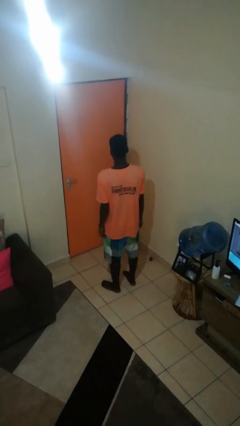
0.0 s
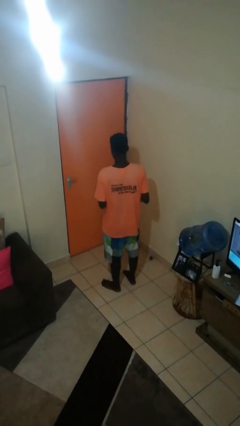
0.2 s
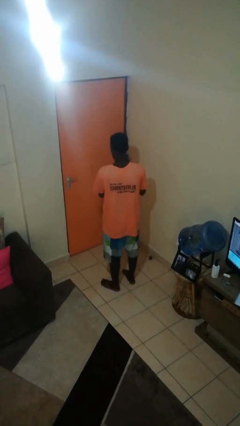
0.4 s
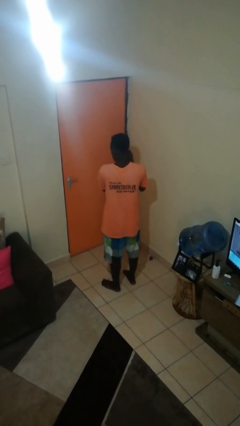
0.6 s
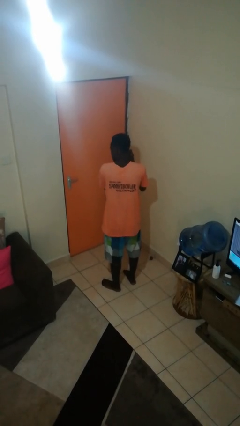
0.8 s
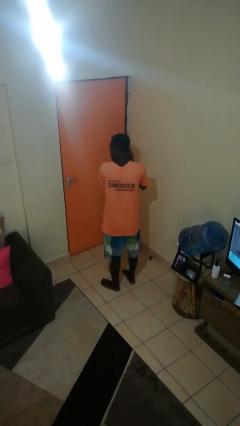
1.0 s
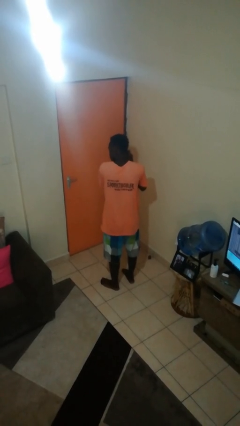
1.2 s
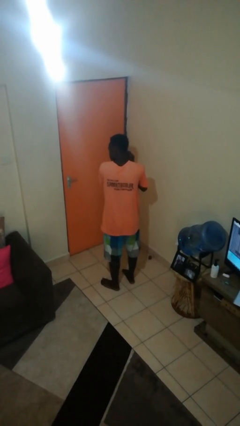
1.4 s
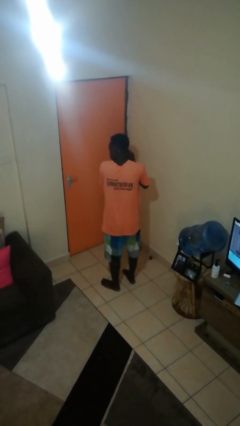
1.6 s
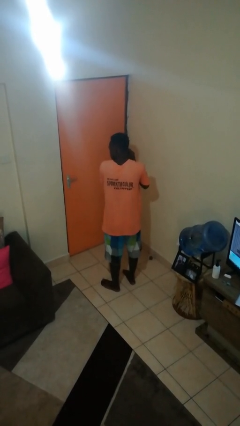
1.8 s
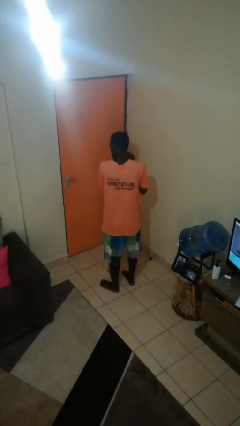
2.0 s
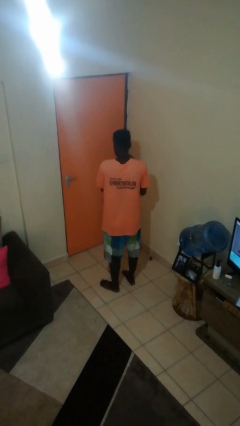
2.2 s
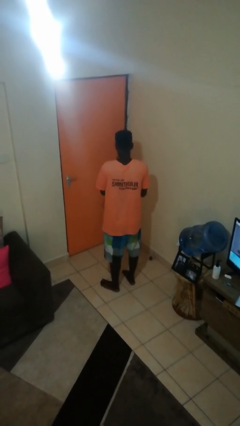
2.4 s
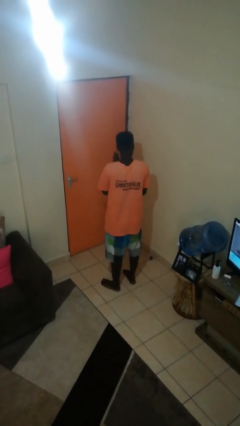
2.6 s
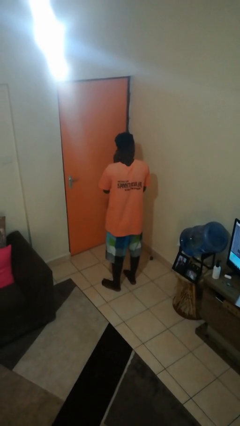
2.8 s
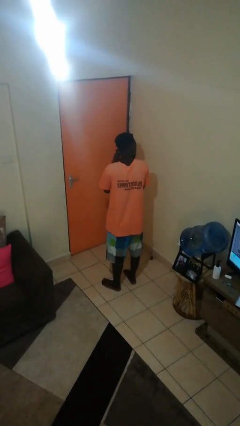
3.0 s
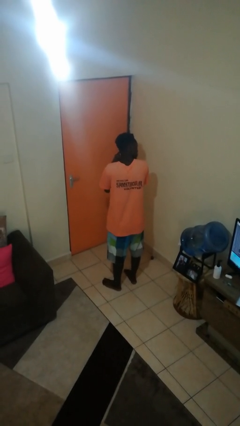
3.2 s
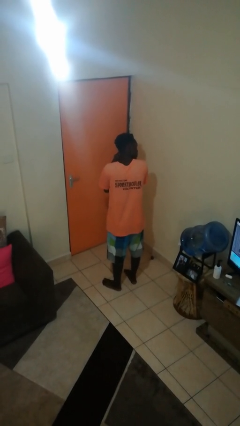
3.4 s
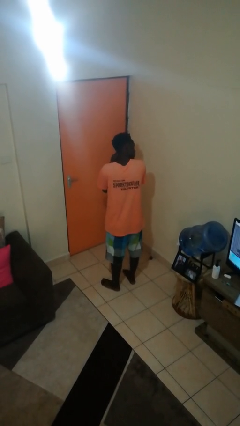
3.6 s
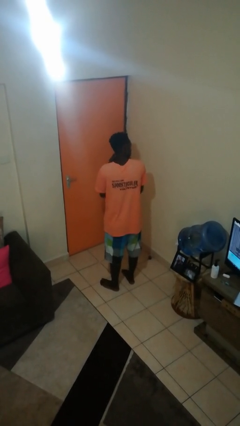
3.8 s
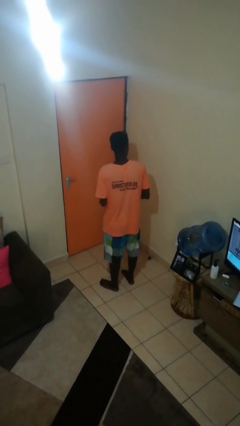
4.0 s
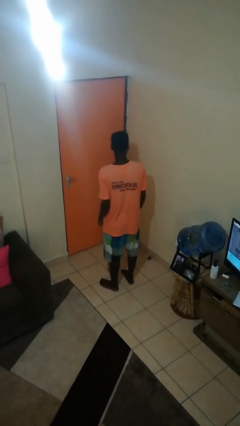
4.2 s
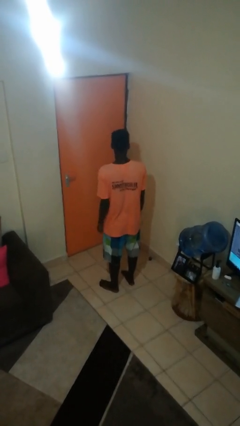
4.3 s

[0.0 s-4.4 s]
person puts on earrings

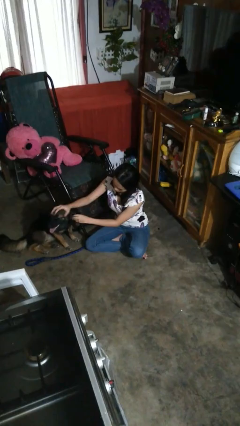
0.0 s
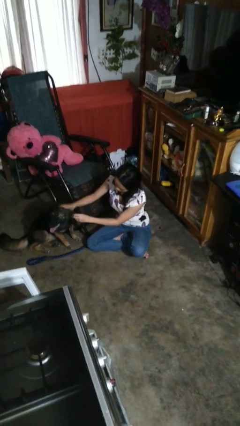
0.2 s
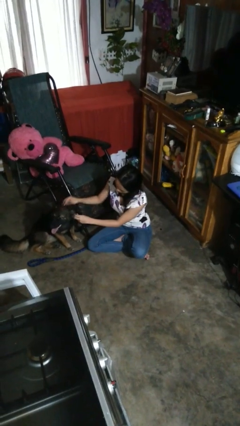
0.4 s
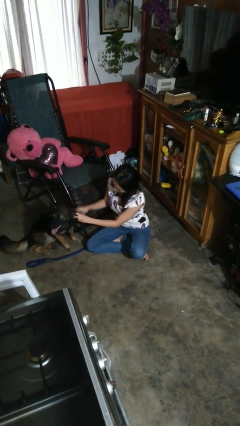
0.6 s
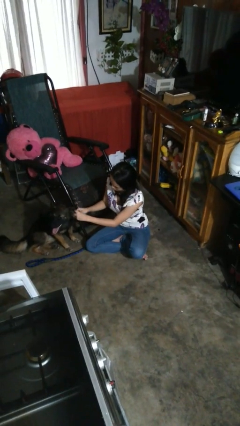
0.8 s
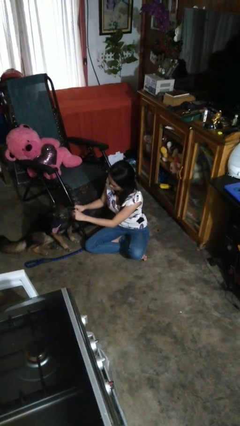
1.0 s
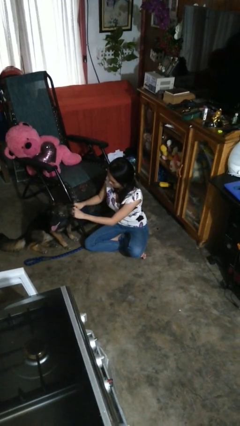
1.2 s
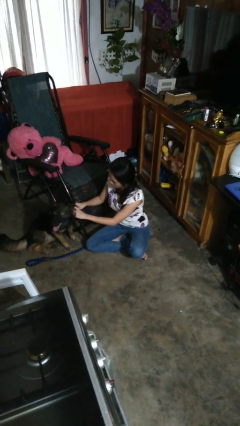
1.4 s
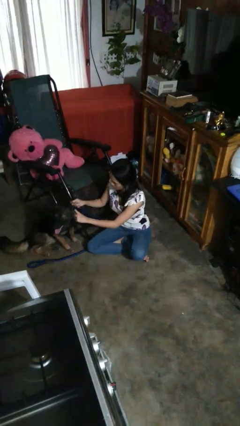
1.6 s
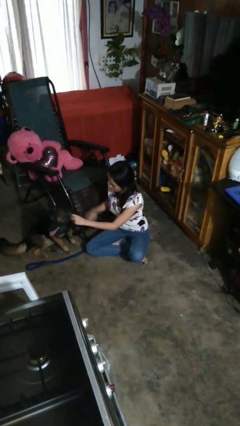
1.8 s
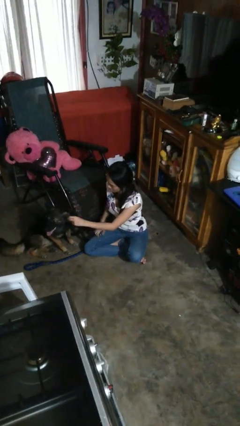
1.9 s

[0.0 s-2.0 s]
person unattaches leash from dog

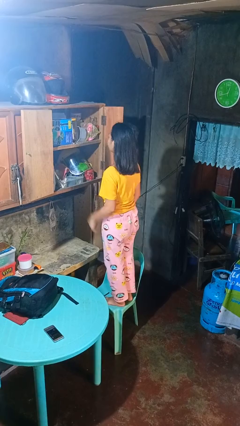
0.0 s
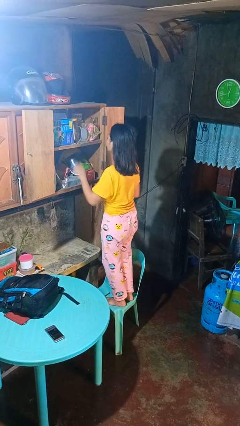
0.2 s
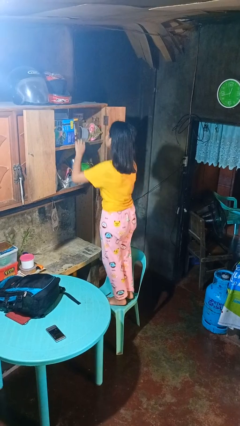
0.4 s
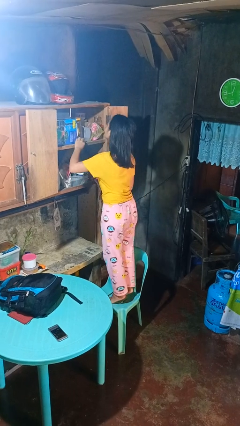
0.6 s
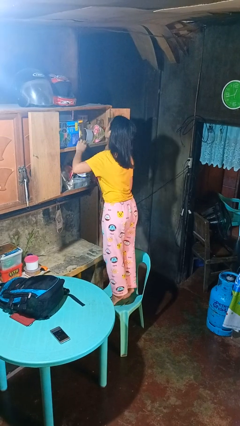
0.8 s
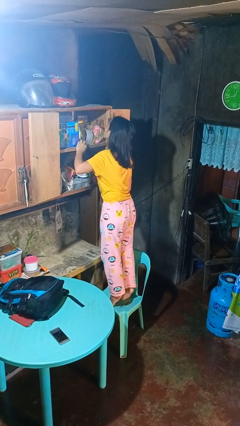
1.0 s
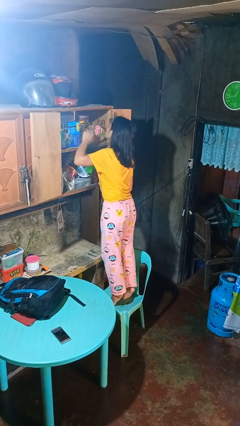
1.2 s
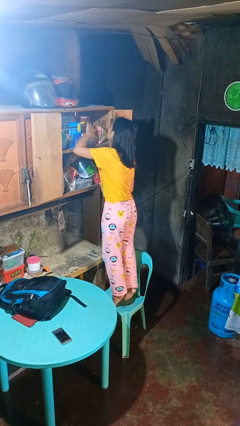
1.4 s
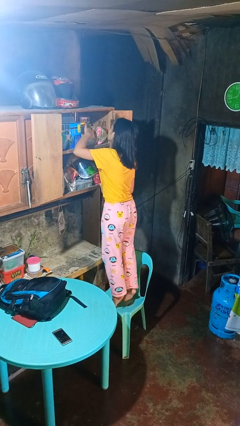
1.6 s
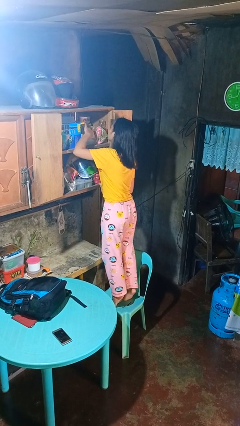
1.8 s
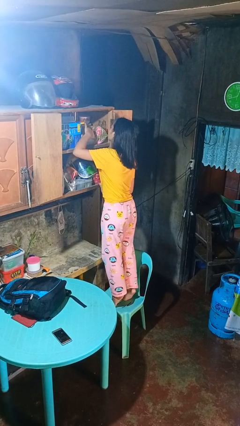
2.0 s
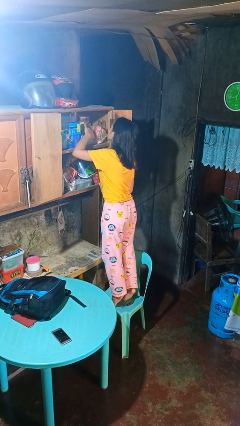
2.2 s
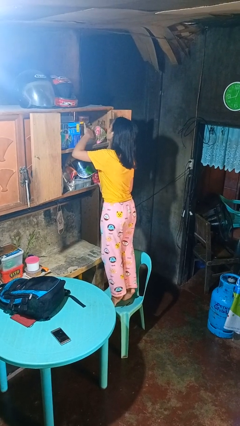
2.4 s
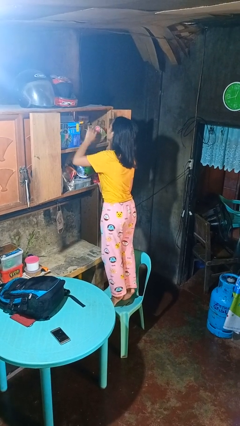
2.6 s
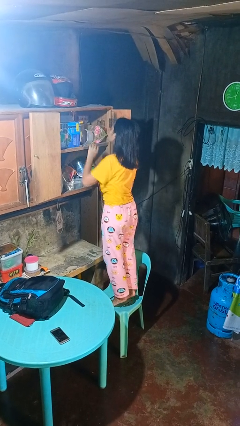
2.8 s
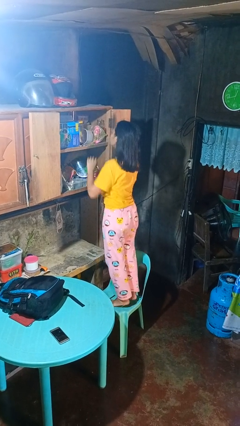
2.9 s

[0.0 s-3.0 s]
person searches in cabinet

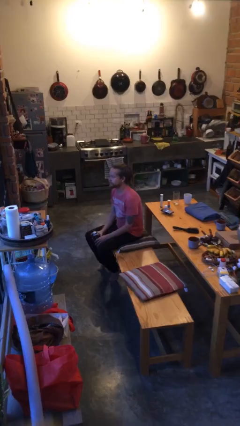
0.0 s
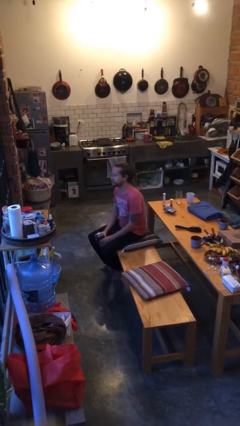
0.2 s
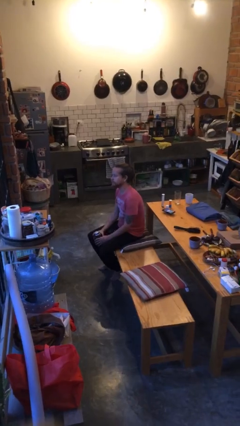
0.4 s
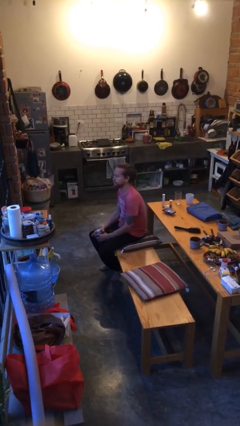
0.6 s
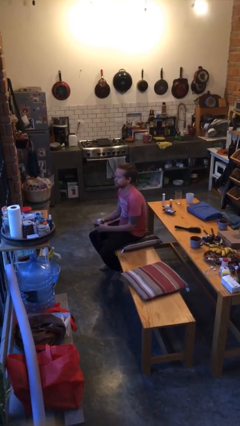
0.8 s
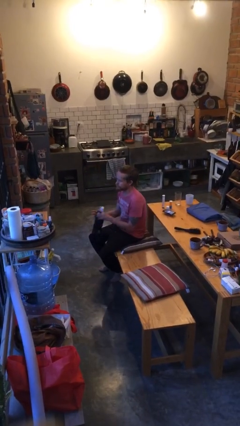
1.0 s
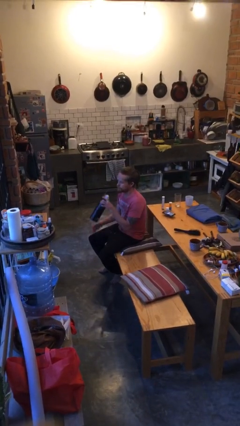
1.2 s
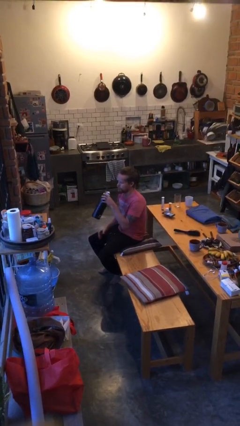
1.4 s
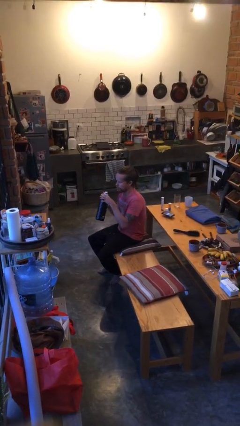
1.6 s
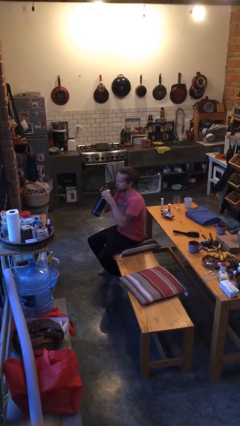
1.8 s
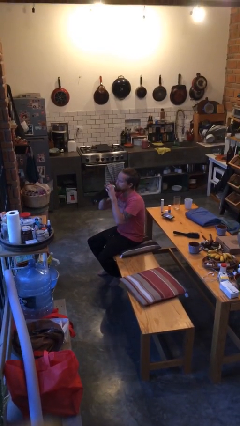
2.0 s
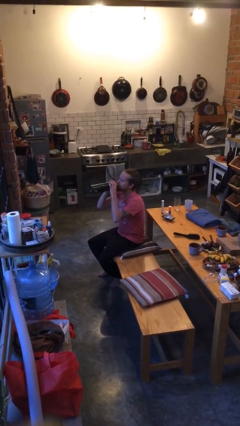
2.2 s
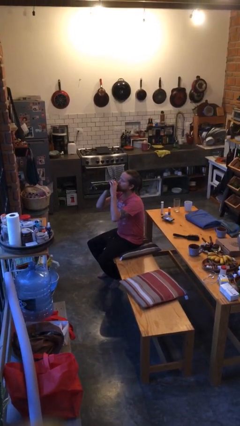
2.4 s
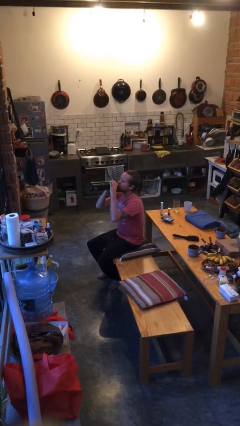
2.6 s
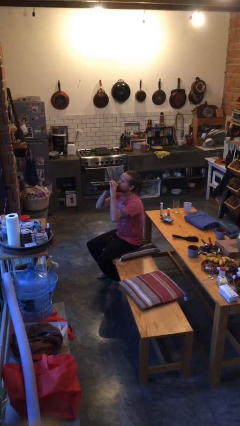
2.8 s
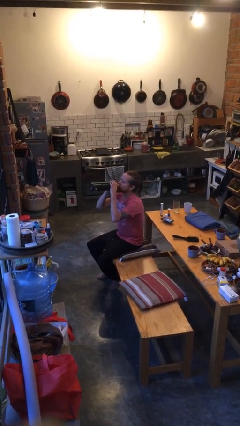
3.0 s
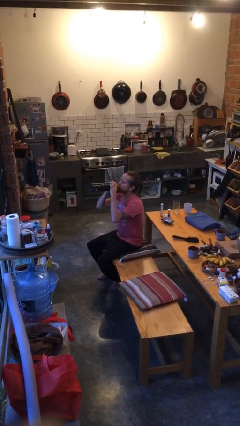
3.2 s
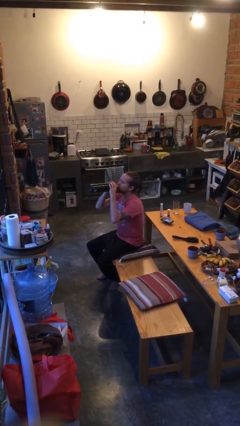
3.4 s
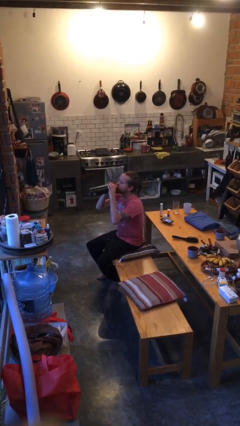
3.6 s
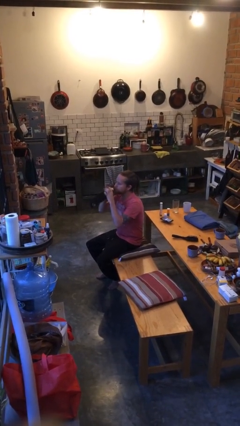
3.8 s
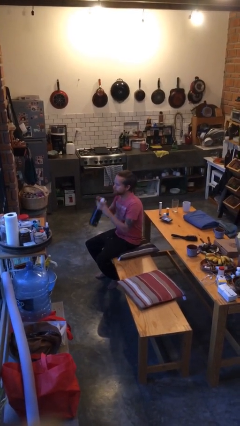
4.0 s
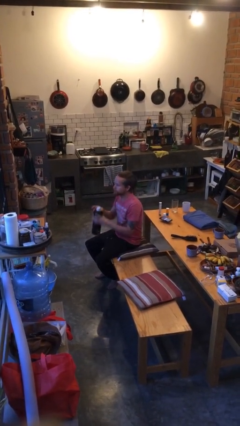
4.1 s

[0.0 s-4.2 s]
person drinks from bottle

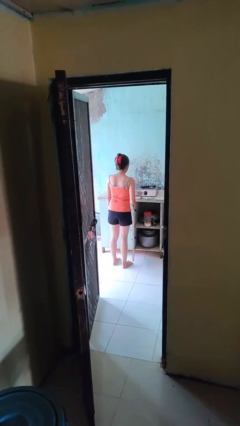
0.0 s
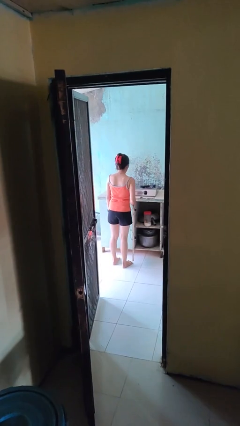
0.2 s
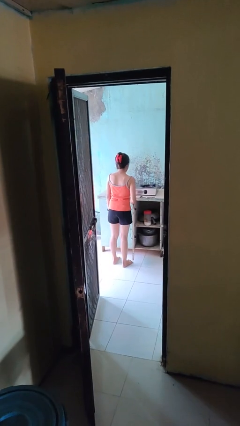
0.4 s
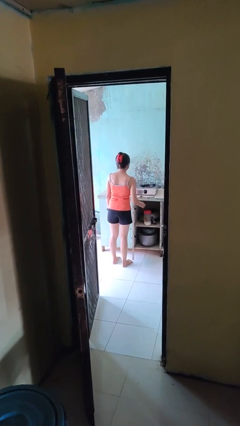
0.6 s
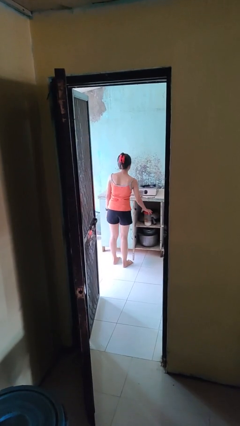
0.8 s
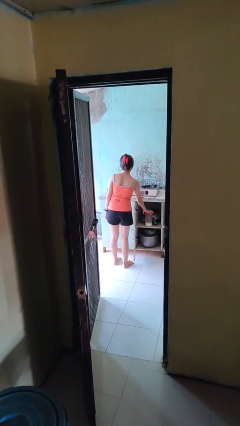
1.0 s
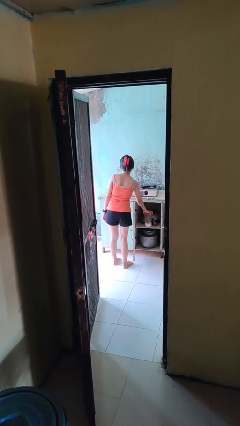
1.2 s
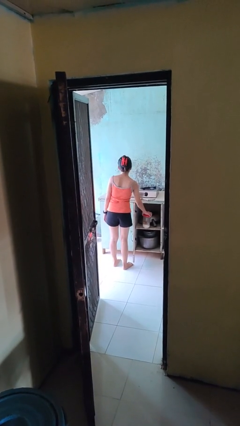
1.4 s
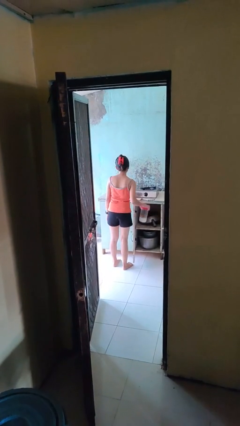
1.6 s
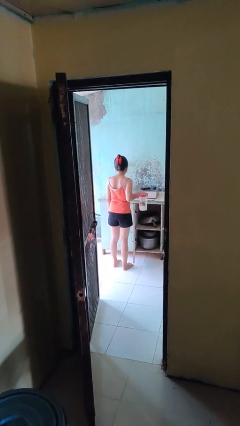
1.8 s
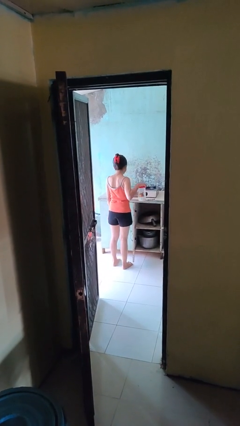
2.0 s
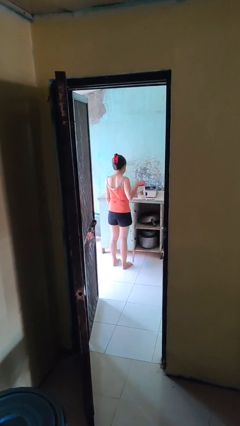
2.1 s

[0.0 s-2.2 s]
person picks up object from cabinet

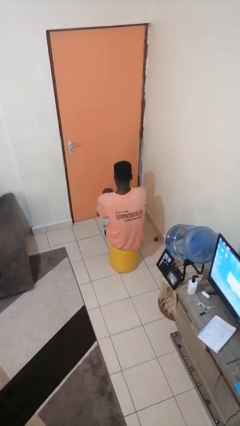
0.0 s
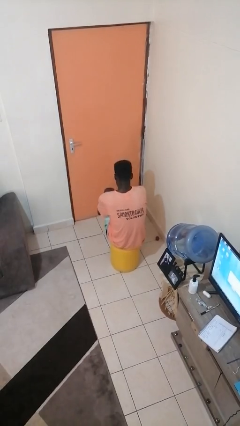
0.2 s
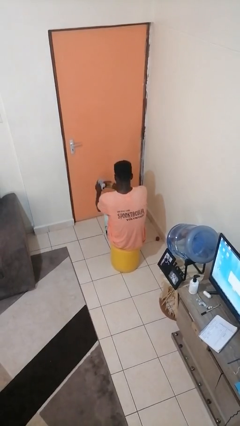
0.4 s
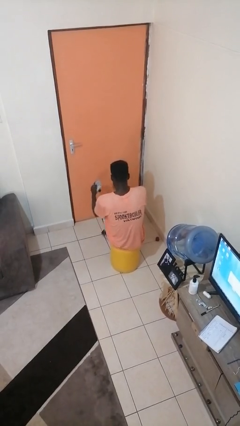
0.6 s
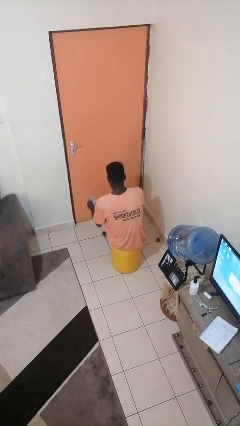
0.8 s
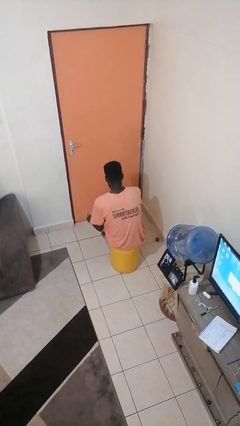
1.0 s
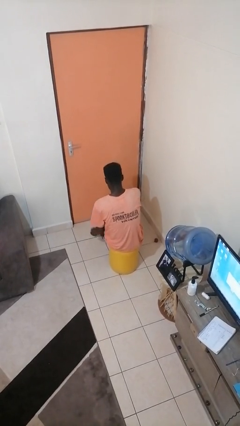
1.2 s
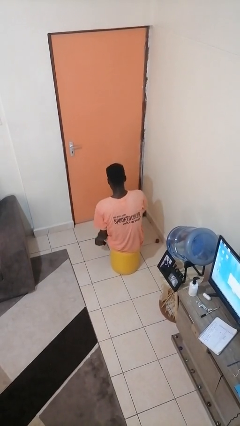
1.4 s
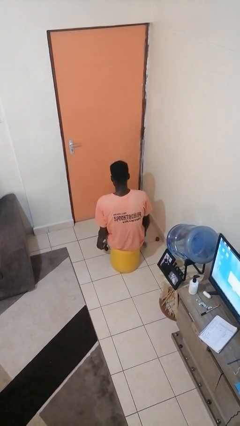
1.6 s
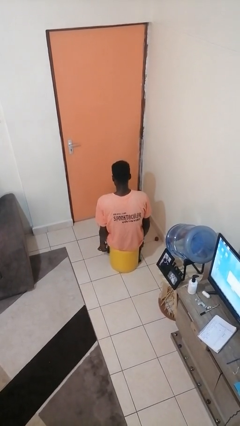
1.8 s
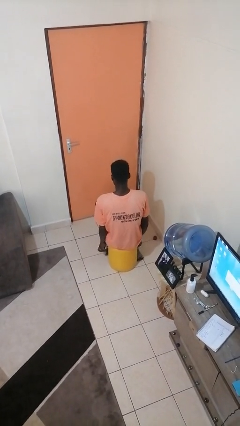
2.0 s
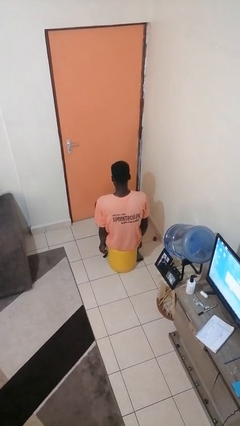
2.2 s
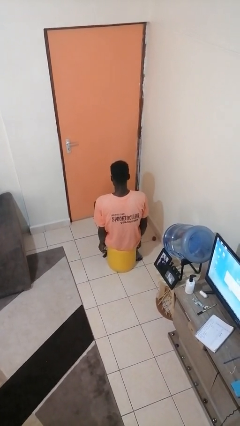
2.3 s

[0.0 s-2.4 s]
person takes off socks
